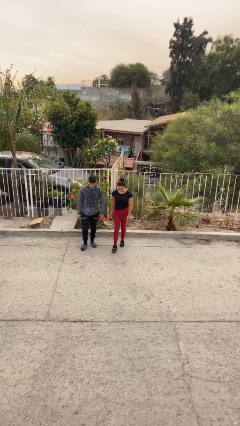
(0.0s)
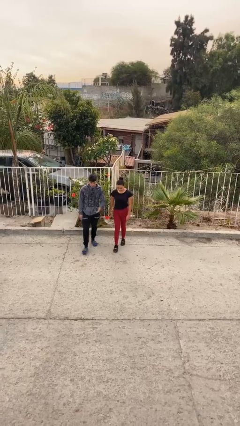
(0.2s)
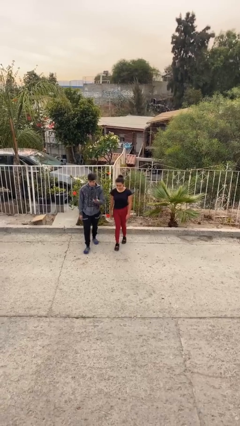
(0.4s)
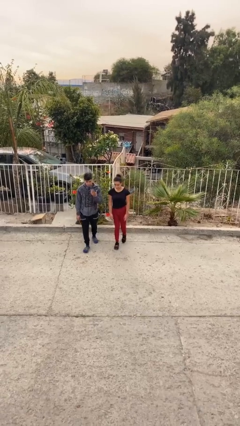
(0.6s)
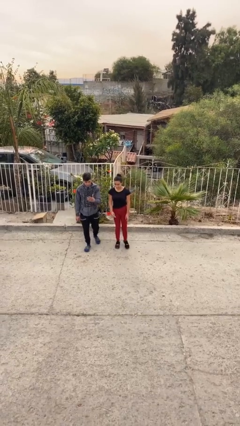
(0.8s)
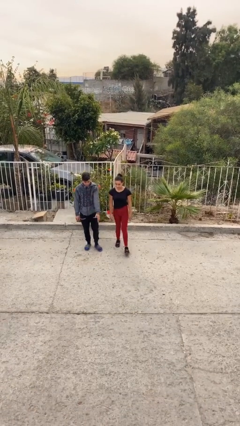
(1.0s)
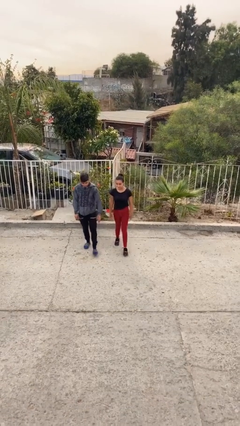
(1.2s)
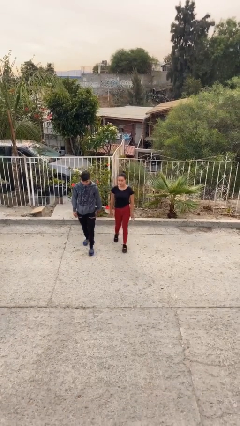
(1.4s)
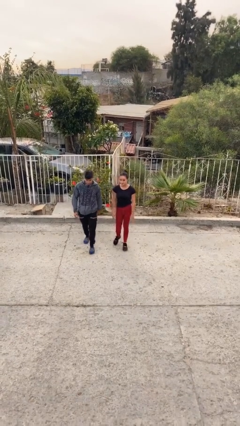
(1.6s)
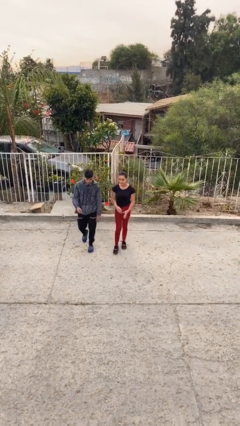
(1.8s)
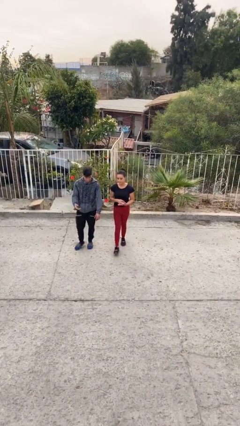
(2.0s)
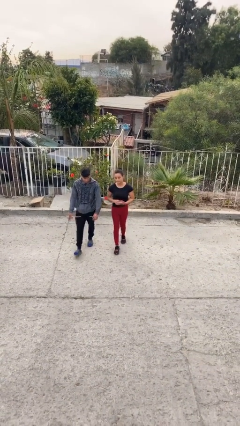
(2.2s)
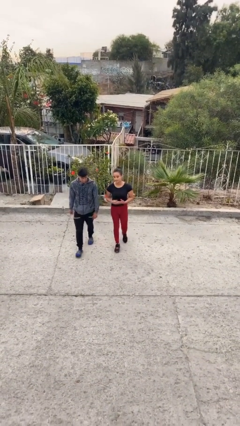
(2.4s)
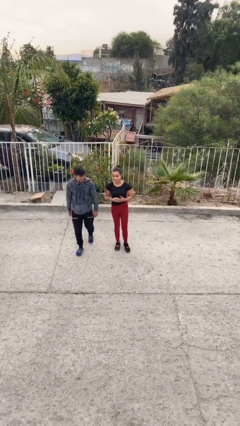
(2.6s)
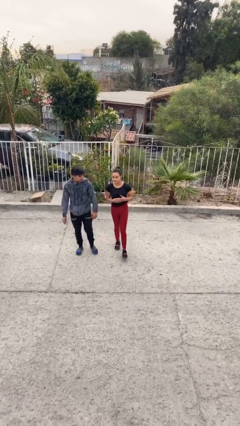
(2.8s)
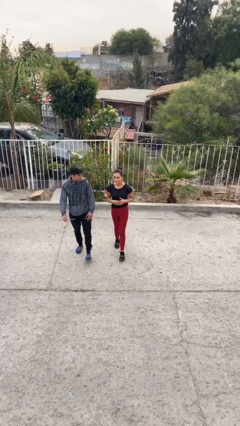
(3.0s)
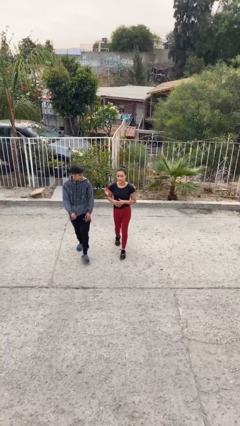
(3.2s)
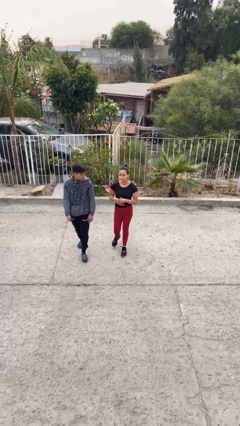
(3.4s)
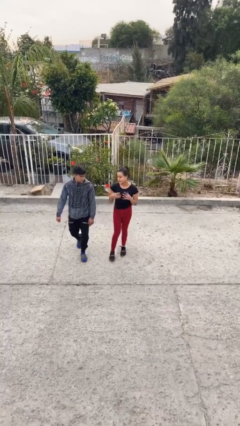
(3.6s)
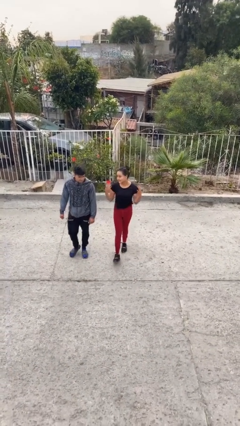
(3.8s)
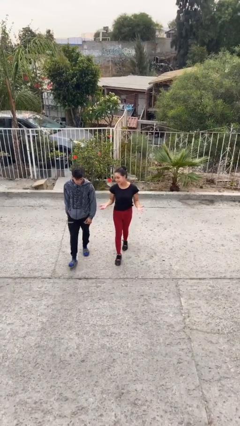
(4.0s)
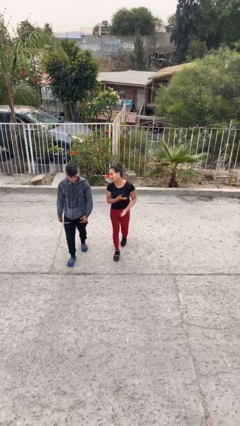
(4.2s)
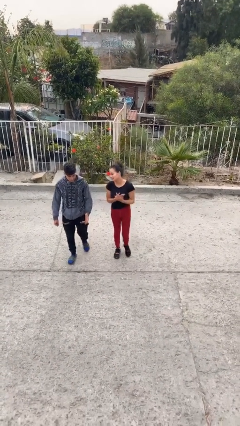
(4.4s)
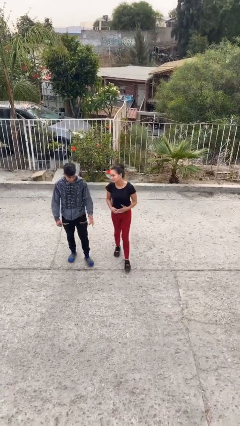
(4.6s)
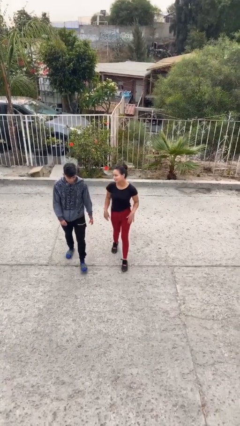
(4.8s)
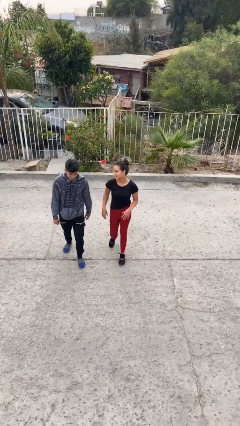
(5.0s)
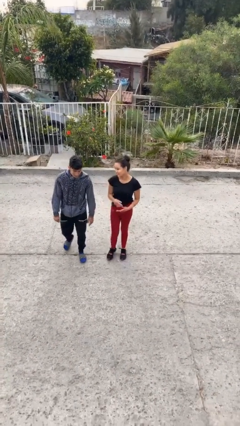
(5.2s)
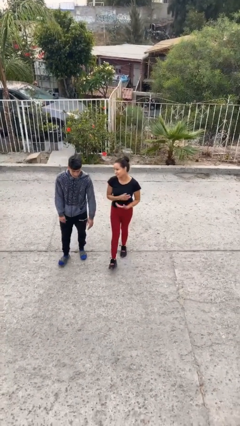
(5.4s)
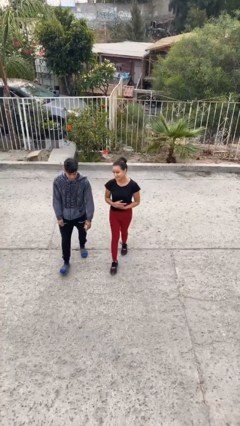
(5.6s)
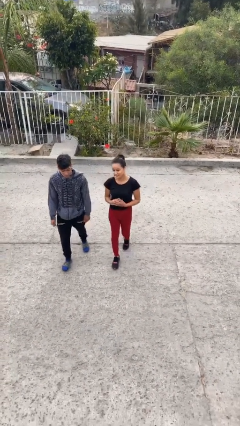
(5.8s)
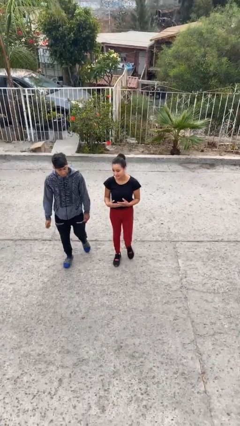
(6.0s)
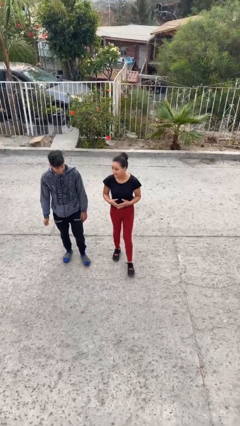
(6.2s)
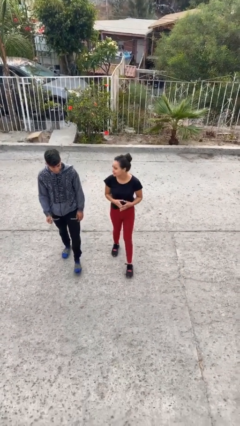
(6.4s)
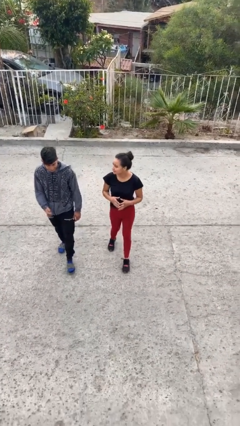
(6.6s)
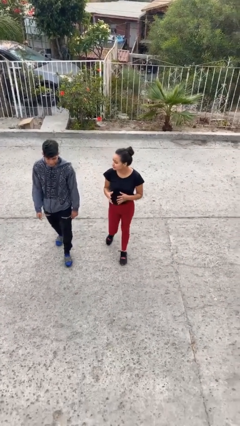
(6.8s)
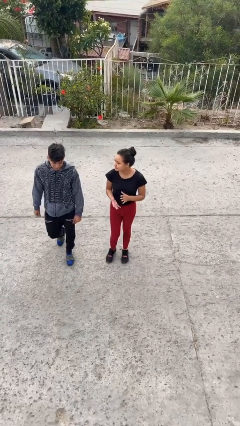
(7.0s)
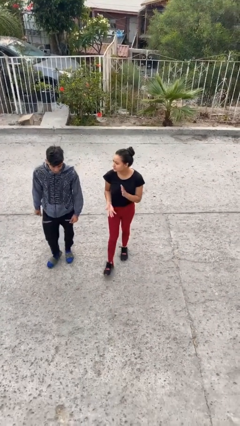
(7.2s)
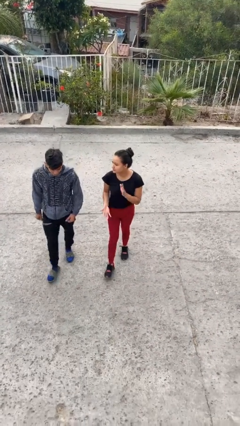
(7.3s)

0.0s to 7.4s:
person talks to person

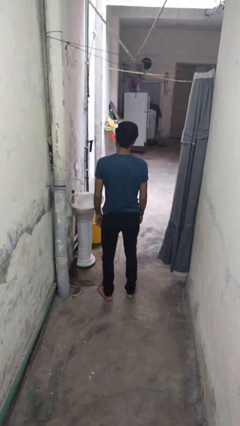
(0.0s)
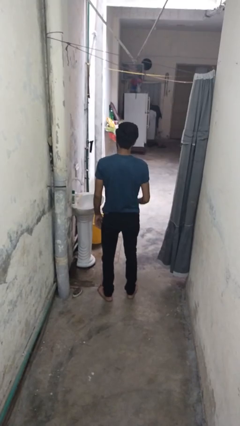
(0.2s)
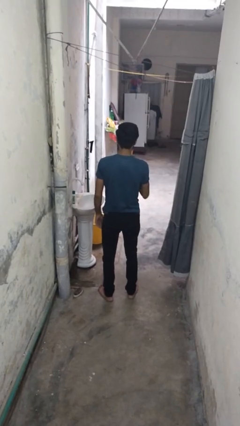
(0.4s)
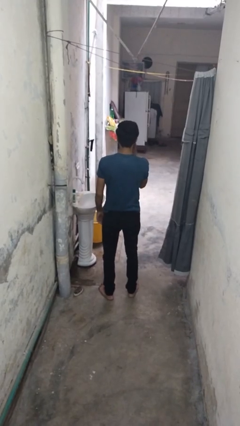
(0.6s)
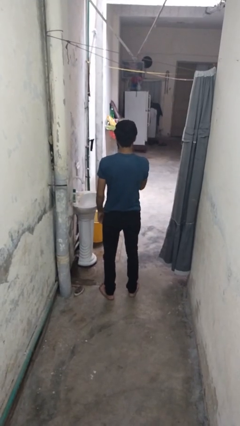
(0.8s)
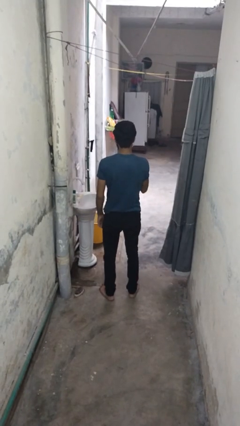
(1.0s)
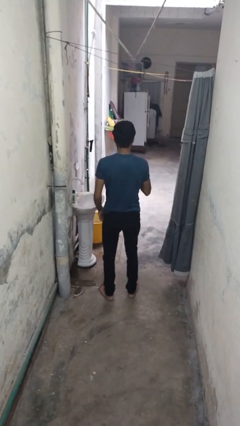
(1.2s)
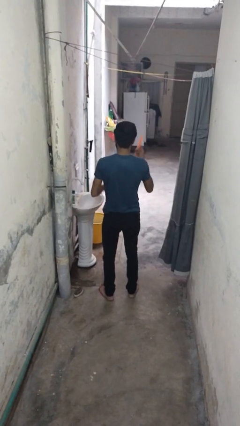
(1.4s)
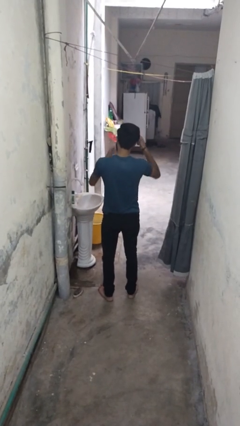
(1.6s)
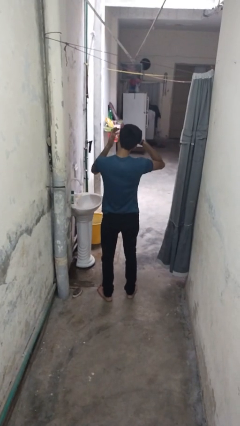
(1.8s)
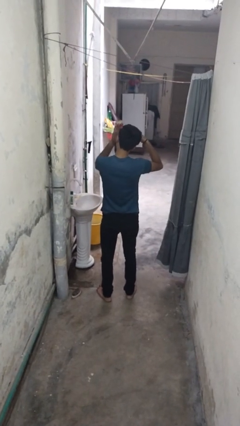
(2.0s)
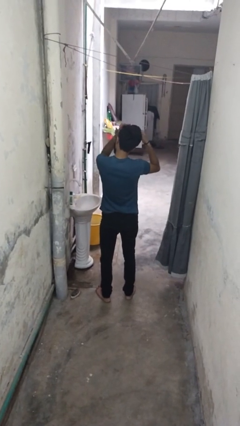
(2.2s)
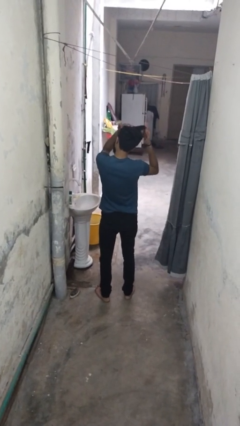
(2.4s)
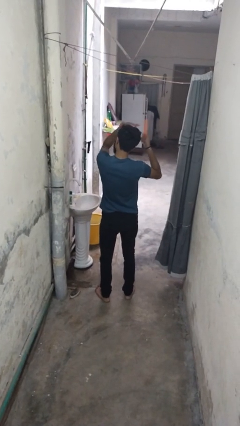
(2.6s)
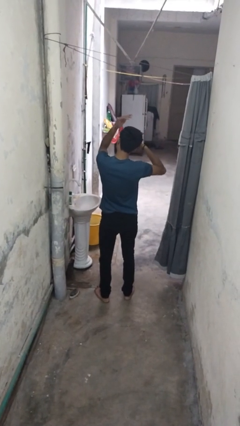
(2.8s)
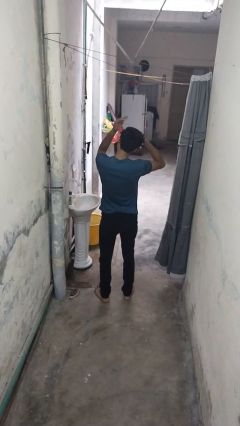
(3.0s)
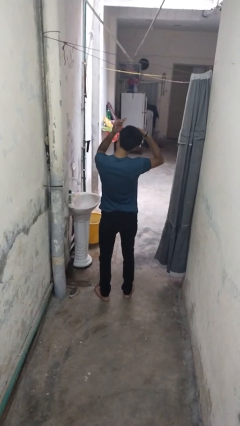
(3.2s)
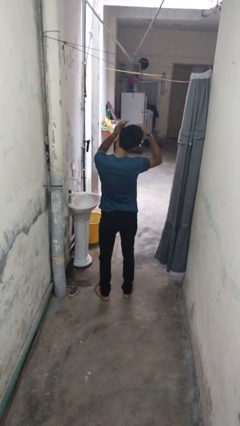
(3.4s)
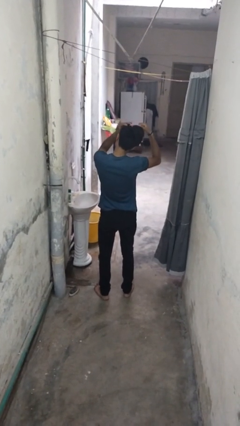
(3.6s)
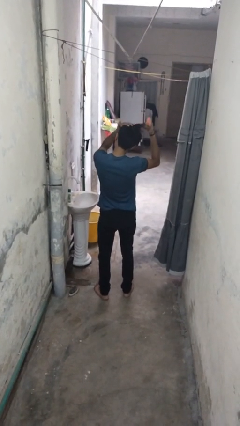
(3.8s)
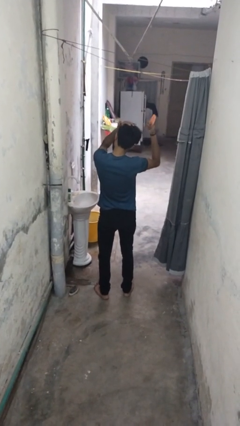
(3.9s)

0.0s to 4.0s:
person brushes hair

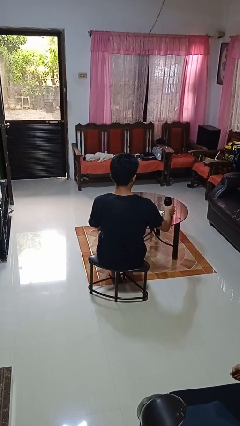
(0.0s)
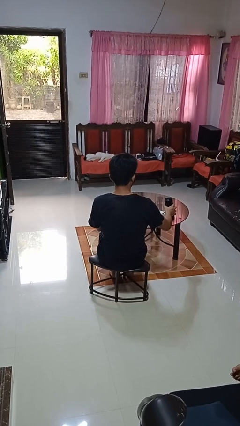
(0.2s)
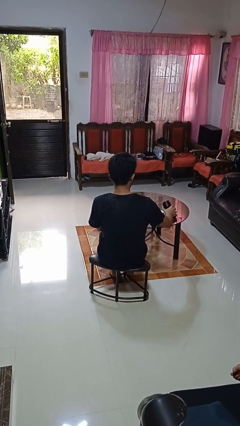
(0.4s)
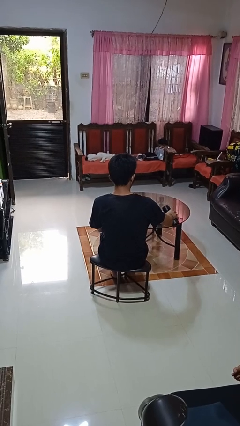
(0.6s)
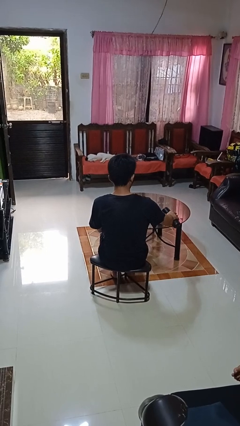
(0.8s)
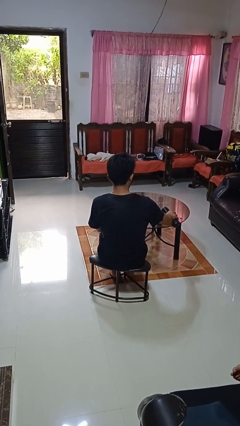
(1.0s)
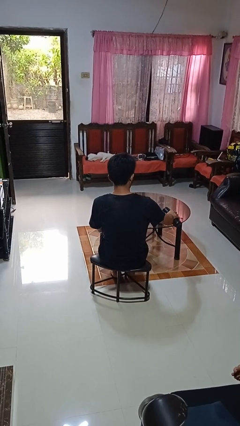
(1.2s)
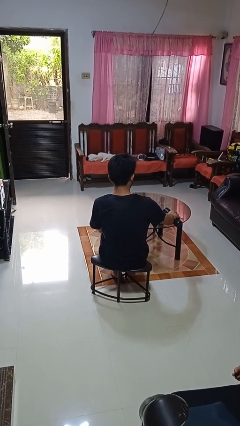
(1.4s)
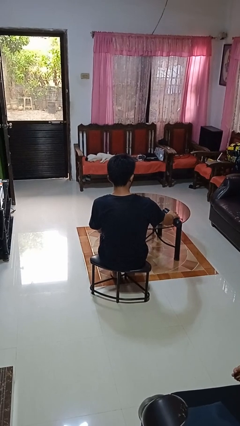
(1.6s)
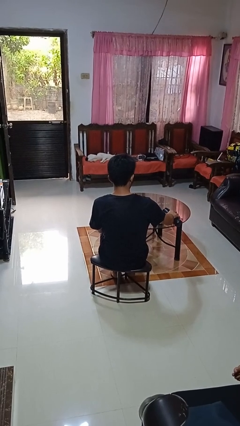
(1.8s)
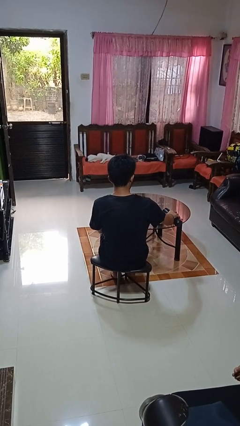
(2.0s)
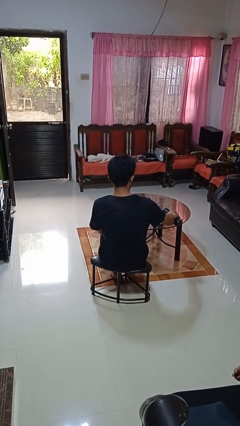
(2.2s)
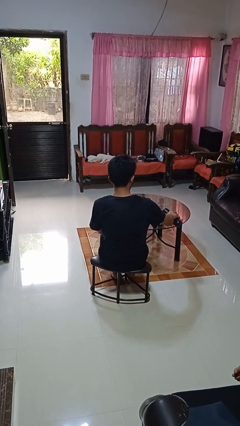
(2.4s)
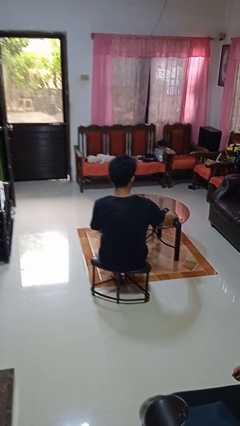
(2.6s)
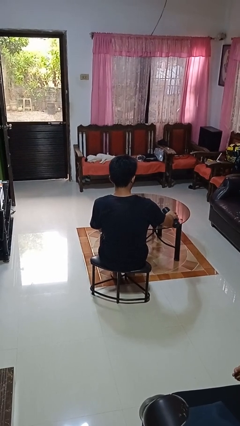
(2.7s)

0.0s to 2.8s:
person pours liquid into cup

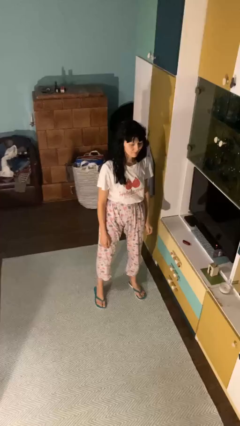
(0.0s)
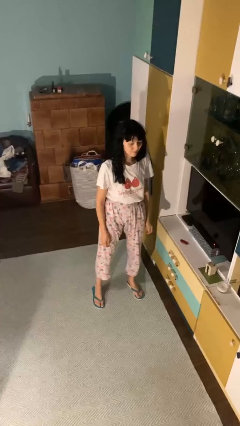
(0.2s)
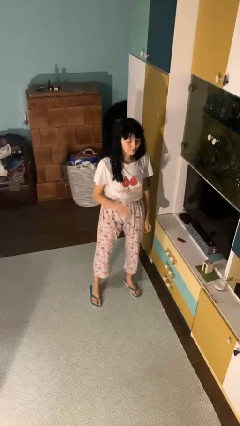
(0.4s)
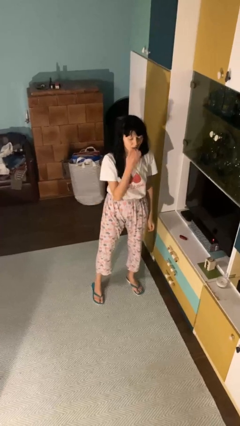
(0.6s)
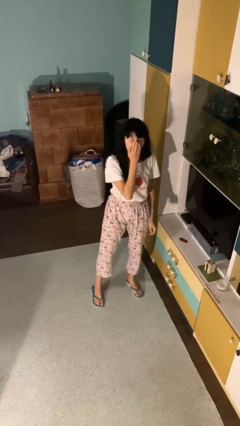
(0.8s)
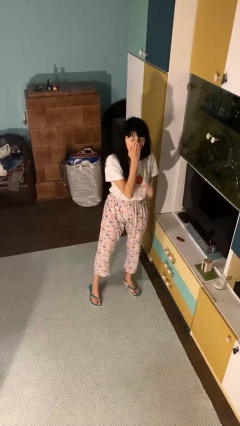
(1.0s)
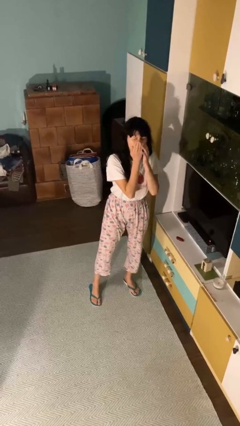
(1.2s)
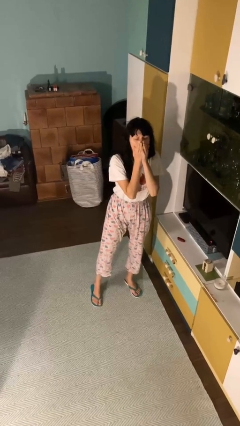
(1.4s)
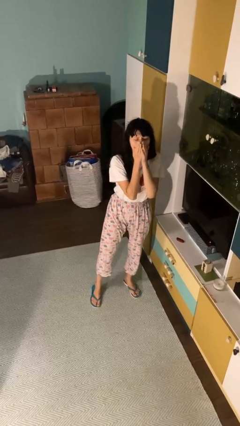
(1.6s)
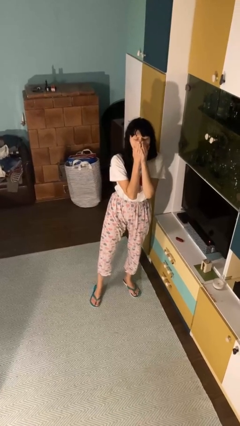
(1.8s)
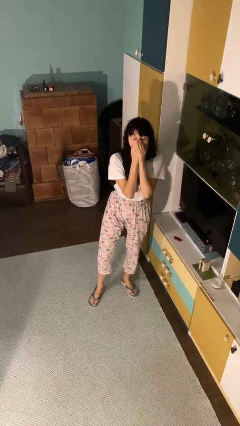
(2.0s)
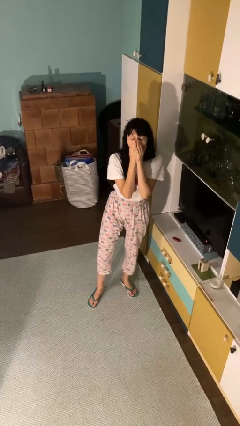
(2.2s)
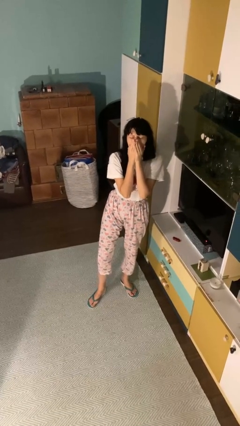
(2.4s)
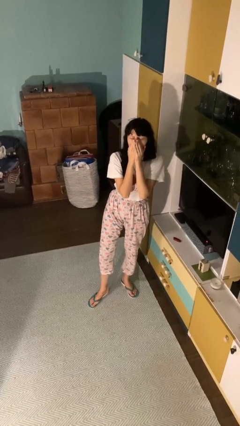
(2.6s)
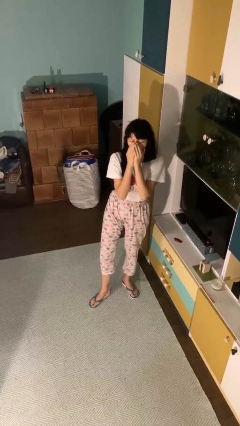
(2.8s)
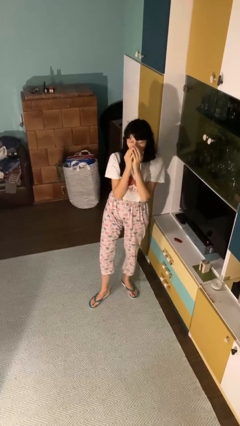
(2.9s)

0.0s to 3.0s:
person yawns

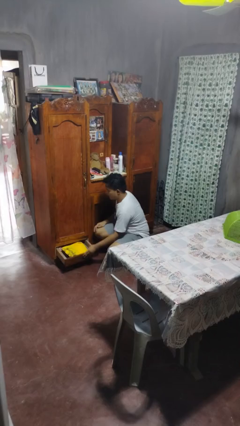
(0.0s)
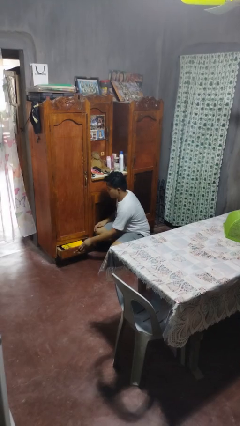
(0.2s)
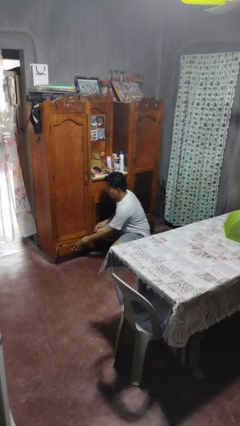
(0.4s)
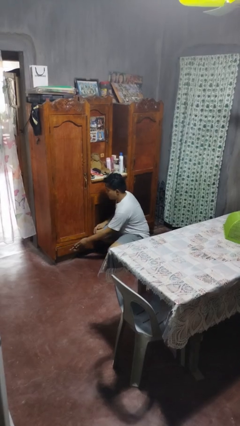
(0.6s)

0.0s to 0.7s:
person closes dresser drawer
